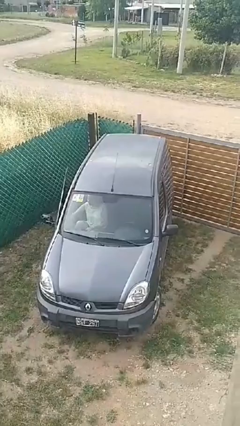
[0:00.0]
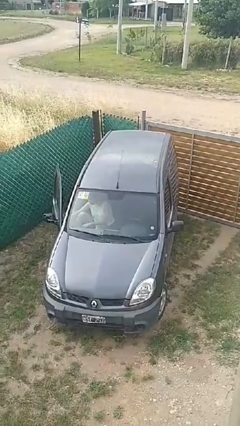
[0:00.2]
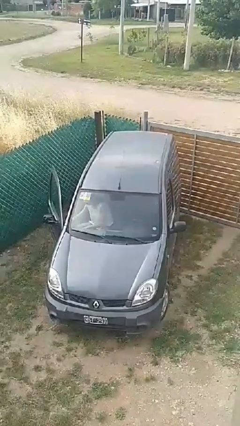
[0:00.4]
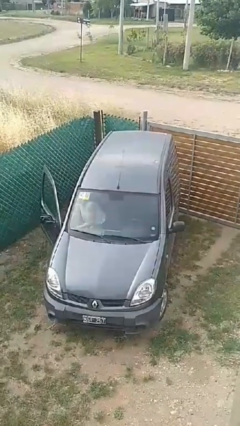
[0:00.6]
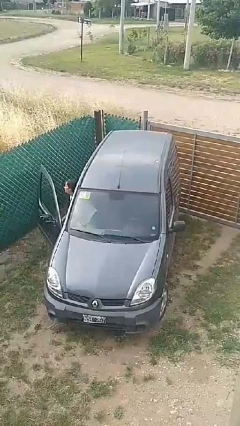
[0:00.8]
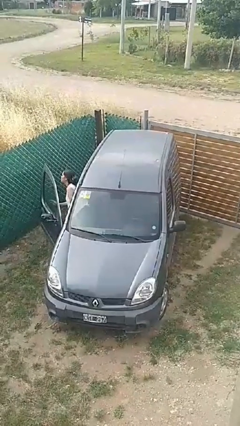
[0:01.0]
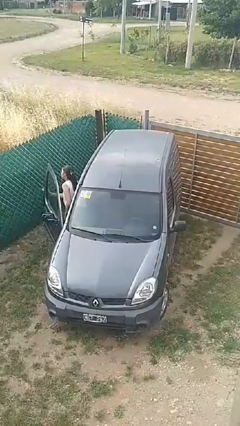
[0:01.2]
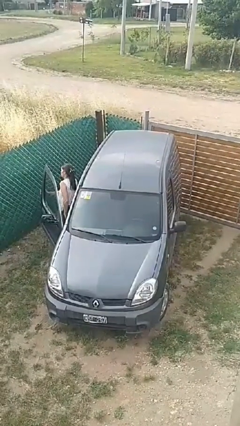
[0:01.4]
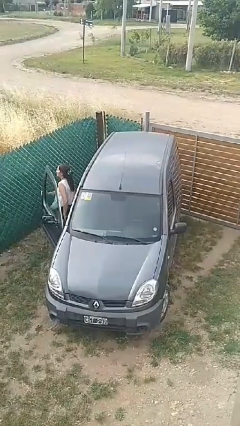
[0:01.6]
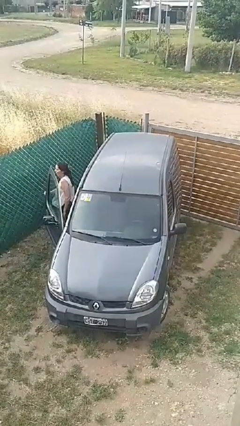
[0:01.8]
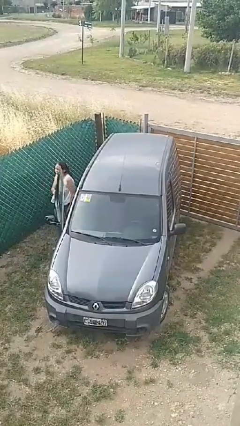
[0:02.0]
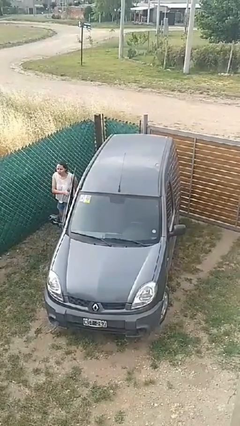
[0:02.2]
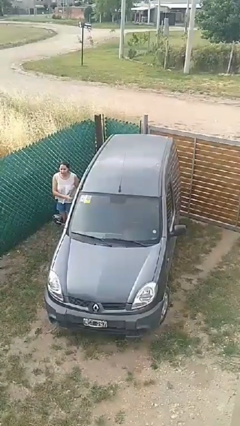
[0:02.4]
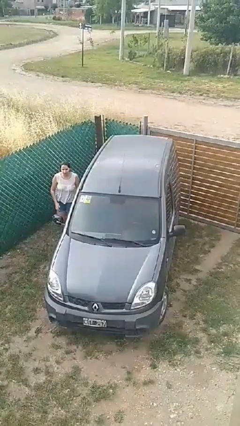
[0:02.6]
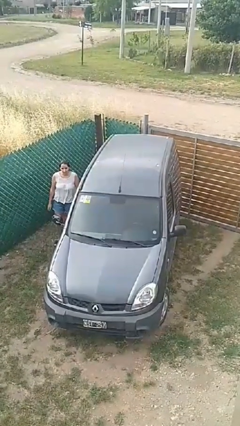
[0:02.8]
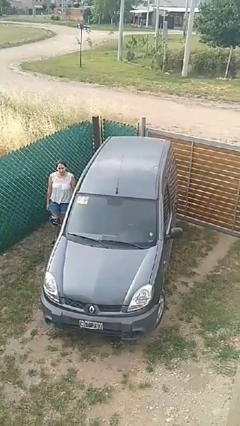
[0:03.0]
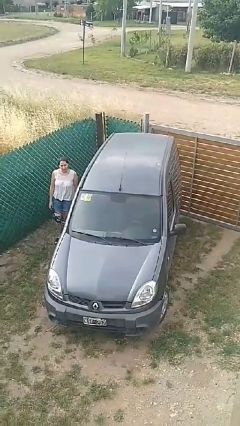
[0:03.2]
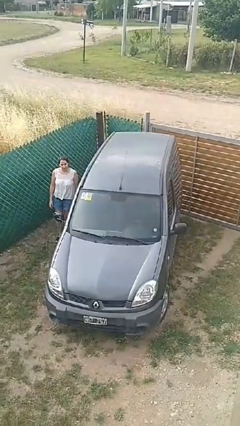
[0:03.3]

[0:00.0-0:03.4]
car drops off person

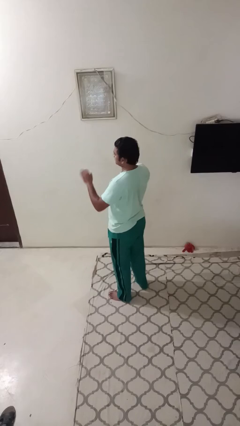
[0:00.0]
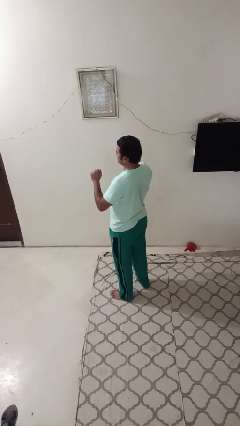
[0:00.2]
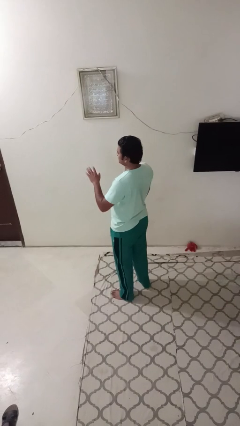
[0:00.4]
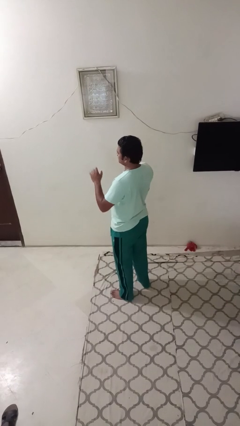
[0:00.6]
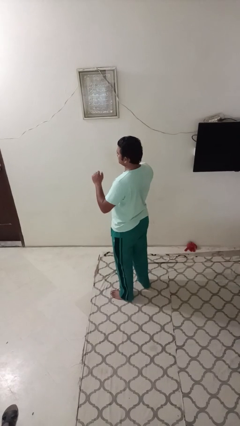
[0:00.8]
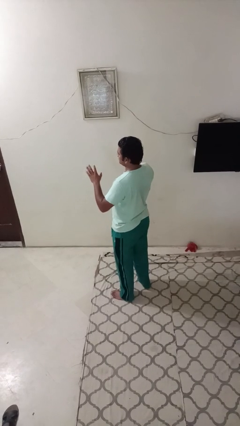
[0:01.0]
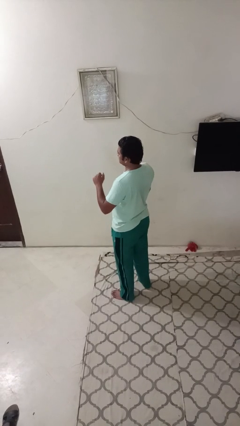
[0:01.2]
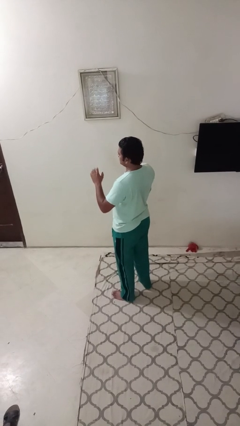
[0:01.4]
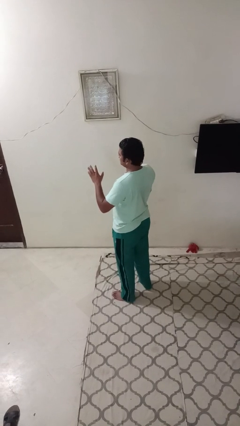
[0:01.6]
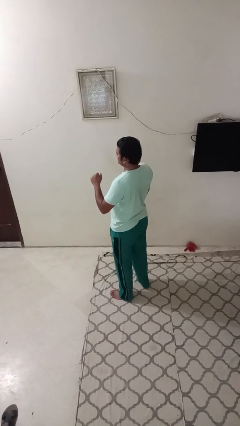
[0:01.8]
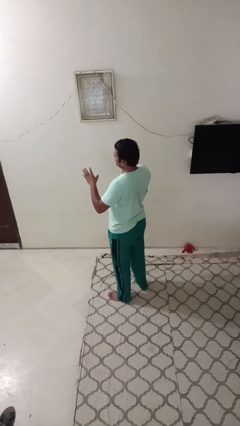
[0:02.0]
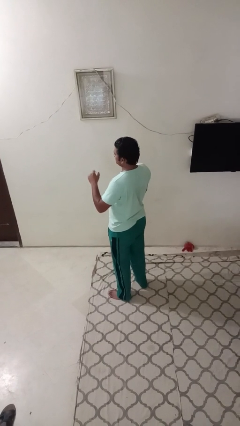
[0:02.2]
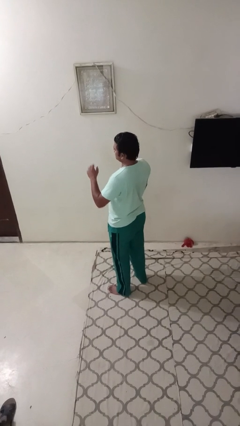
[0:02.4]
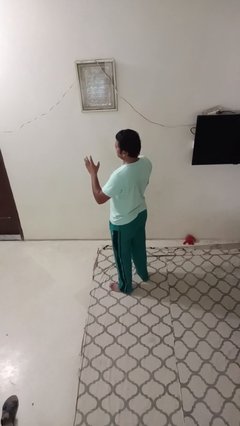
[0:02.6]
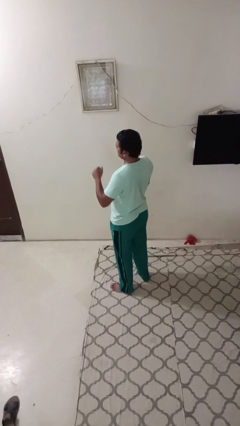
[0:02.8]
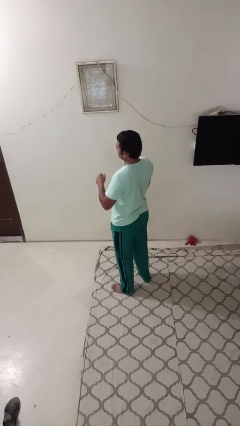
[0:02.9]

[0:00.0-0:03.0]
person gestures come here

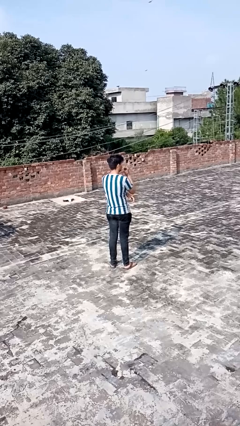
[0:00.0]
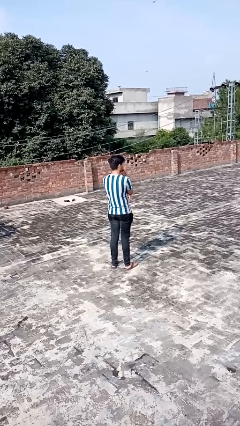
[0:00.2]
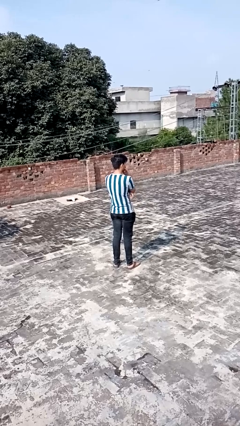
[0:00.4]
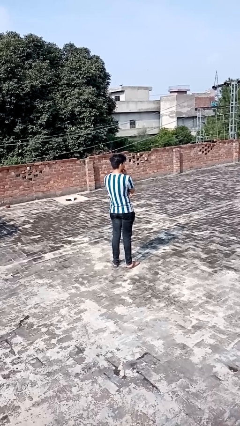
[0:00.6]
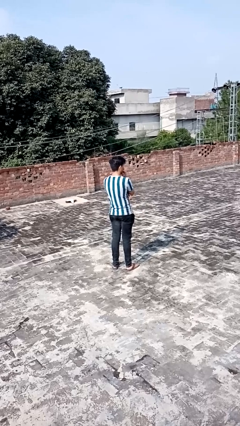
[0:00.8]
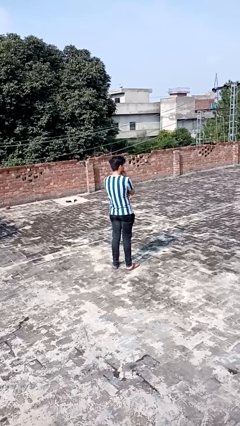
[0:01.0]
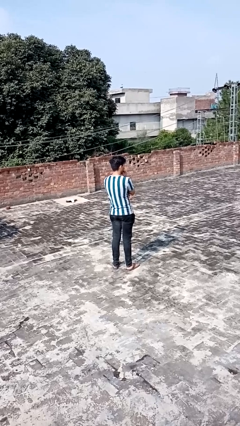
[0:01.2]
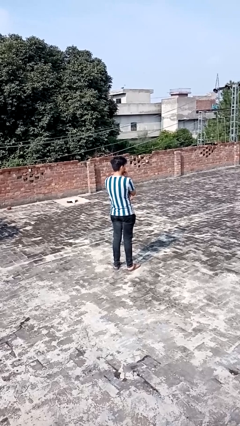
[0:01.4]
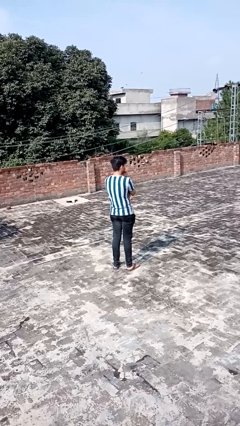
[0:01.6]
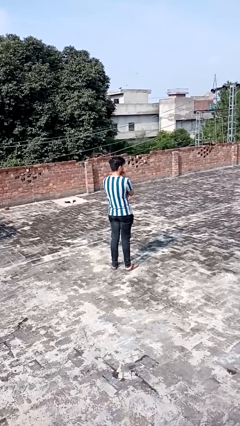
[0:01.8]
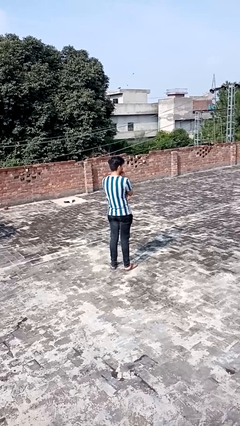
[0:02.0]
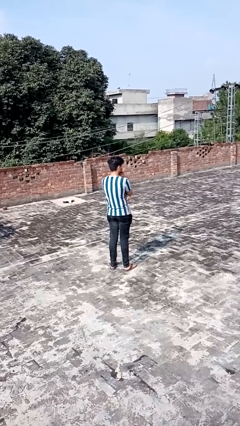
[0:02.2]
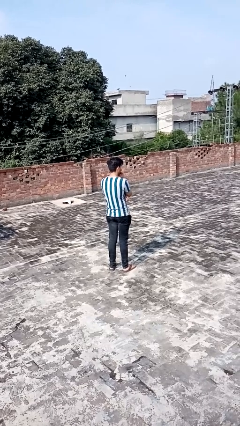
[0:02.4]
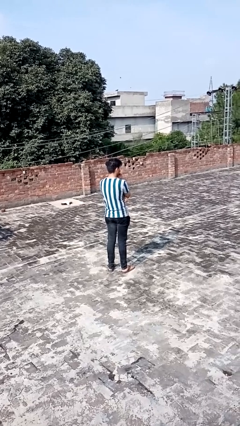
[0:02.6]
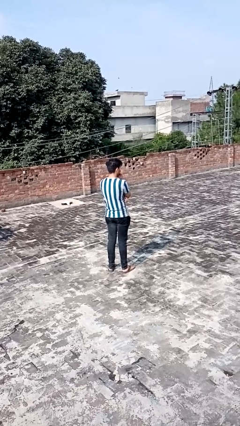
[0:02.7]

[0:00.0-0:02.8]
person strokes chin

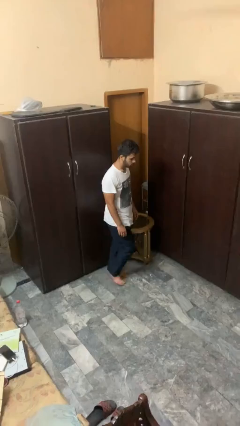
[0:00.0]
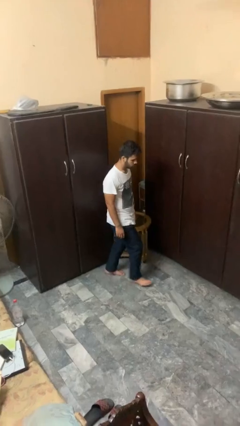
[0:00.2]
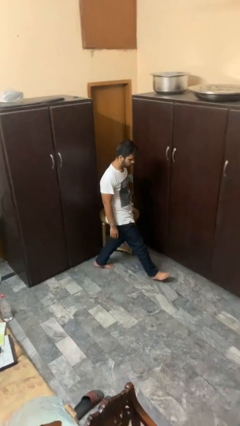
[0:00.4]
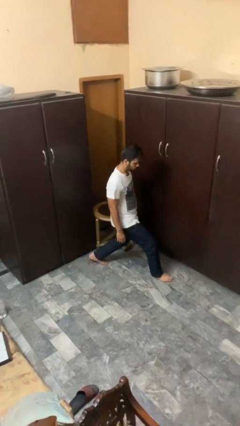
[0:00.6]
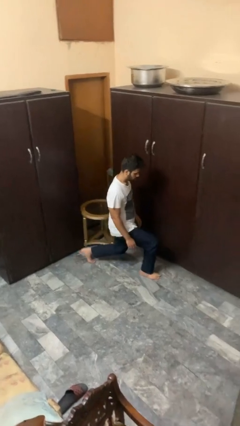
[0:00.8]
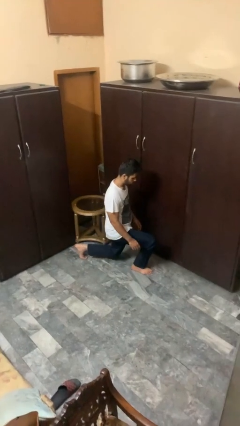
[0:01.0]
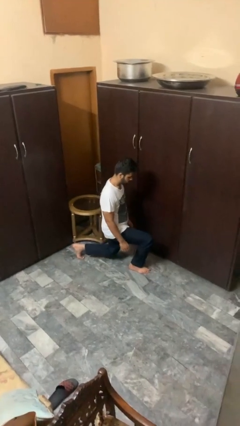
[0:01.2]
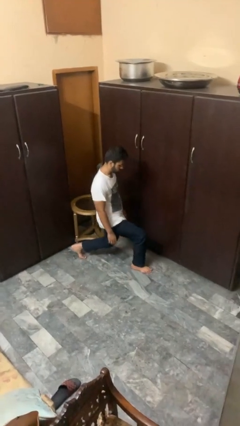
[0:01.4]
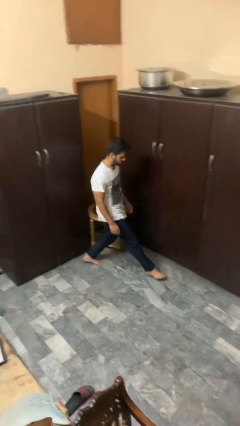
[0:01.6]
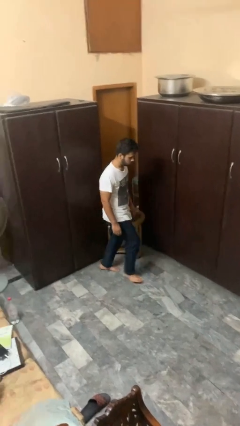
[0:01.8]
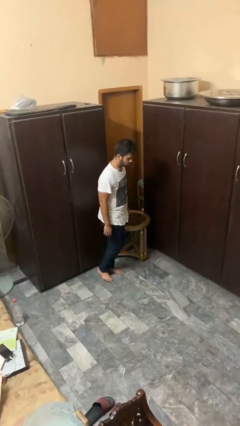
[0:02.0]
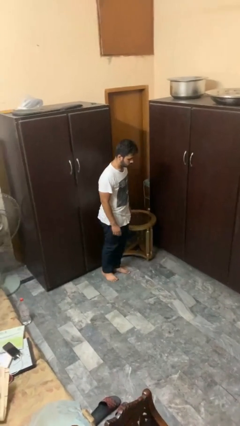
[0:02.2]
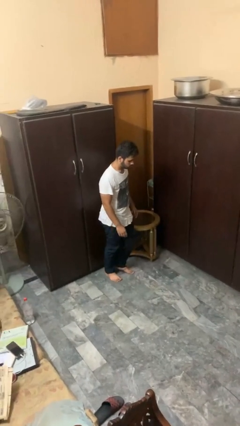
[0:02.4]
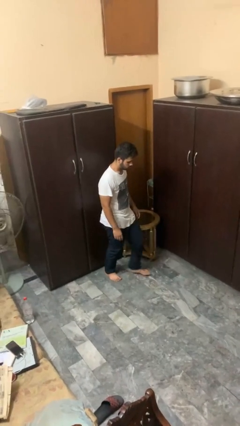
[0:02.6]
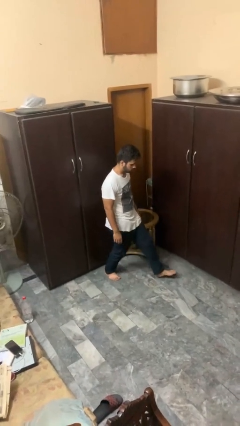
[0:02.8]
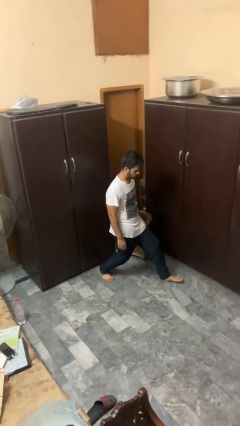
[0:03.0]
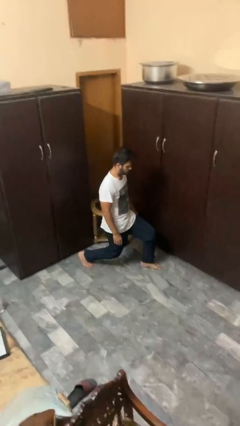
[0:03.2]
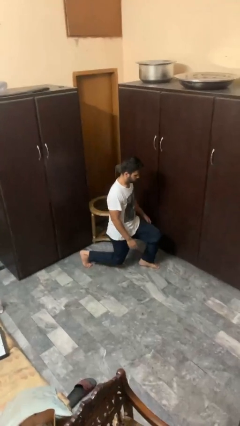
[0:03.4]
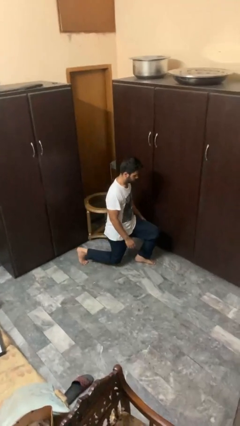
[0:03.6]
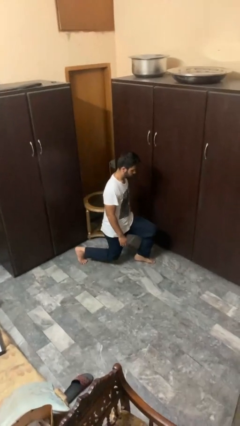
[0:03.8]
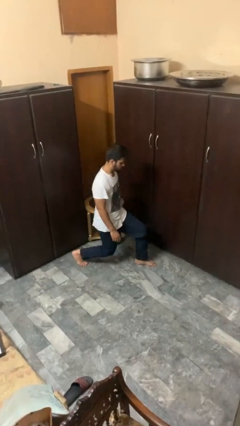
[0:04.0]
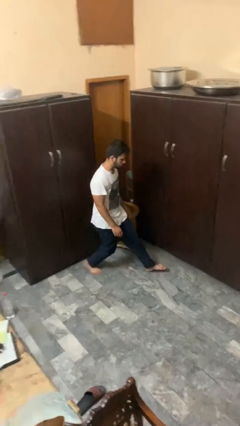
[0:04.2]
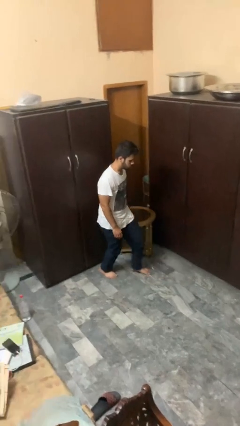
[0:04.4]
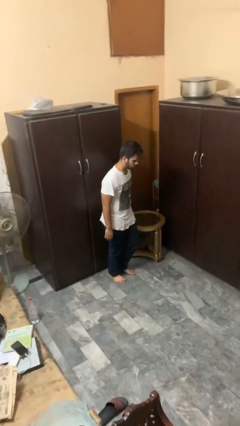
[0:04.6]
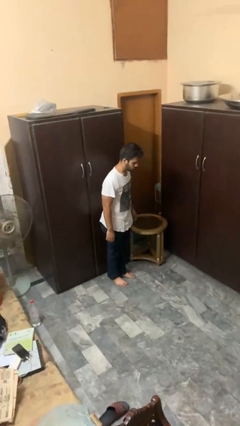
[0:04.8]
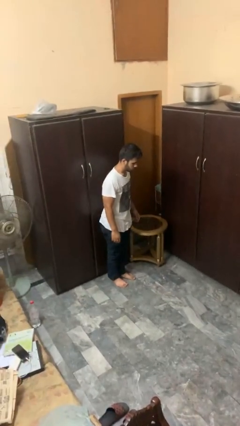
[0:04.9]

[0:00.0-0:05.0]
person exercises with lunges

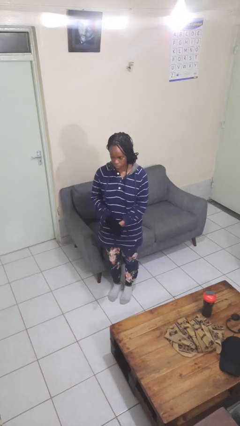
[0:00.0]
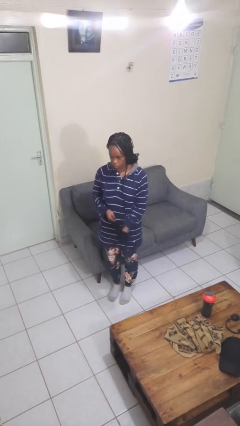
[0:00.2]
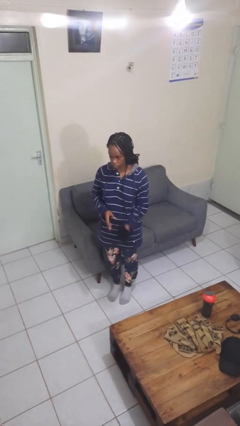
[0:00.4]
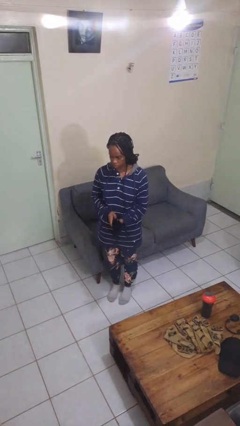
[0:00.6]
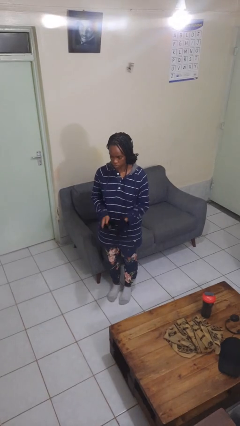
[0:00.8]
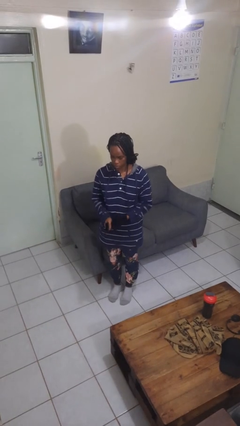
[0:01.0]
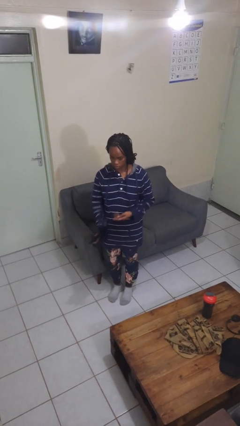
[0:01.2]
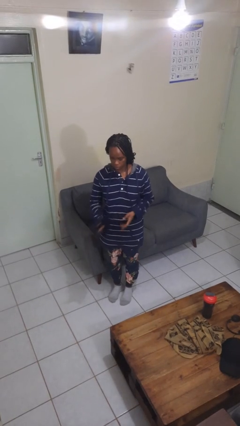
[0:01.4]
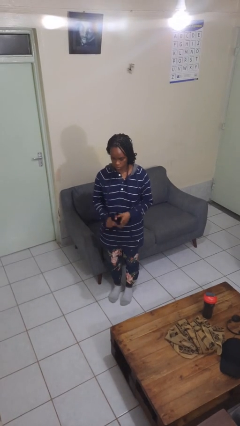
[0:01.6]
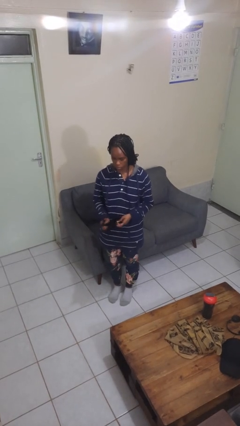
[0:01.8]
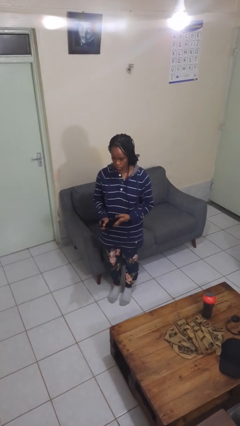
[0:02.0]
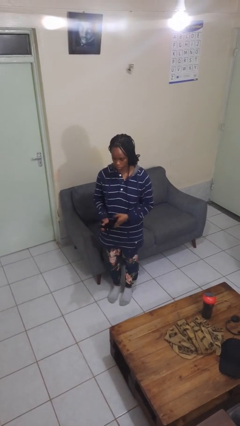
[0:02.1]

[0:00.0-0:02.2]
person takes off gloves

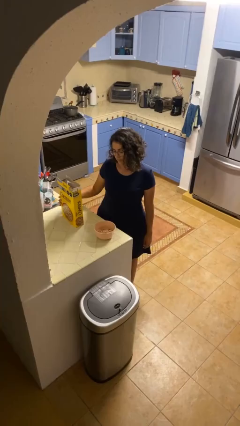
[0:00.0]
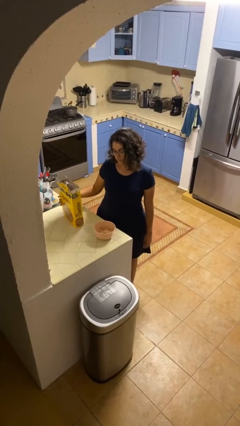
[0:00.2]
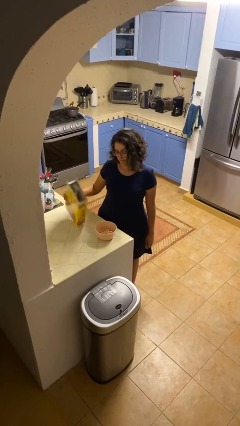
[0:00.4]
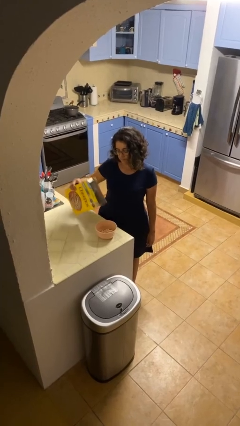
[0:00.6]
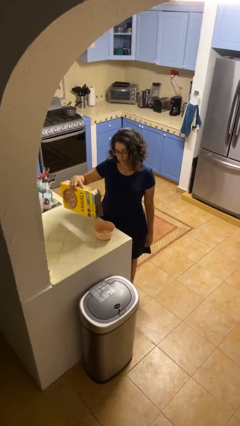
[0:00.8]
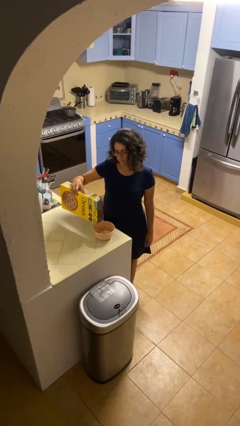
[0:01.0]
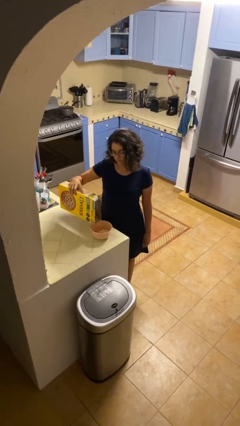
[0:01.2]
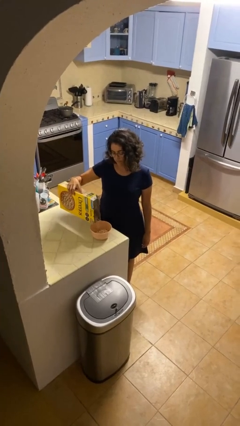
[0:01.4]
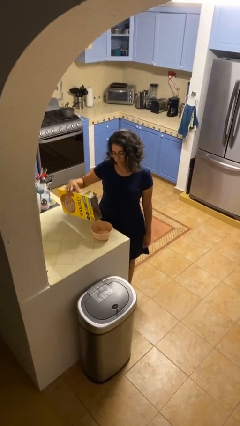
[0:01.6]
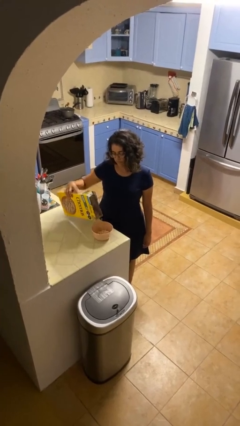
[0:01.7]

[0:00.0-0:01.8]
person pours into bowl
